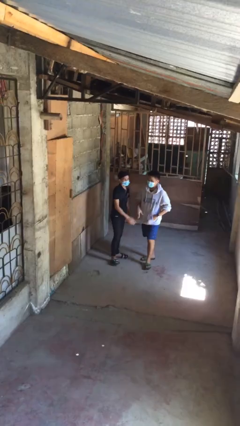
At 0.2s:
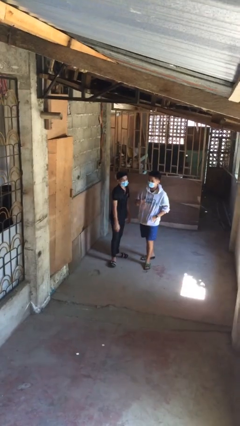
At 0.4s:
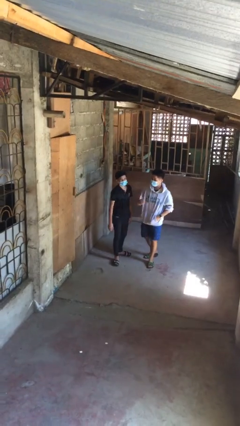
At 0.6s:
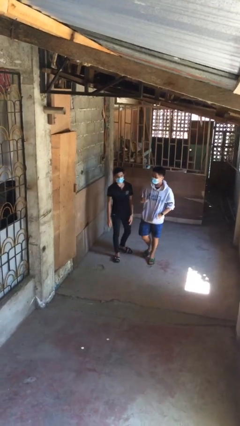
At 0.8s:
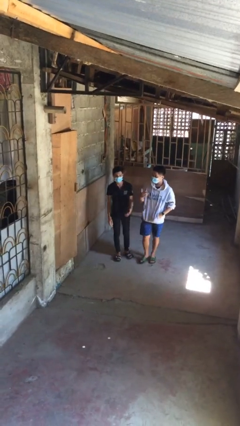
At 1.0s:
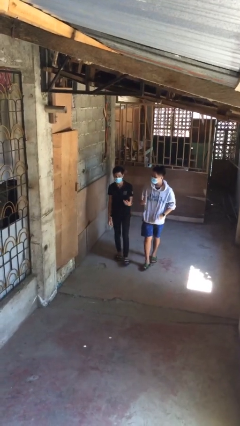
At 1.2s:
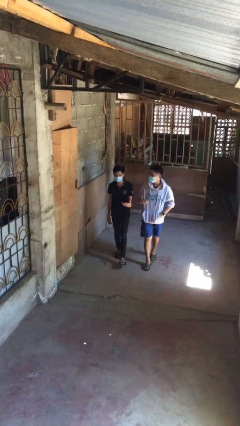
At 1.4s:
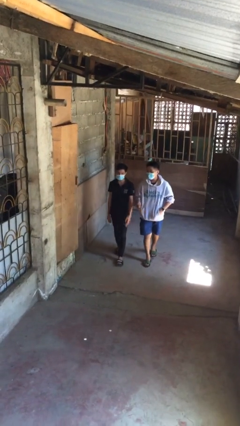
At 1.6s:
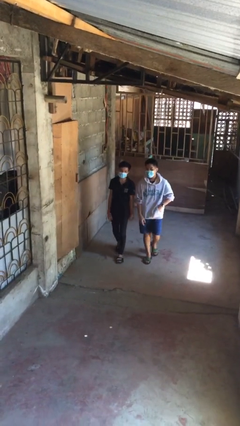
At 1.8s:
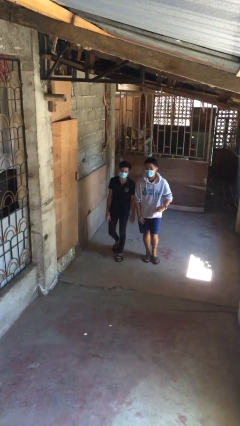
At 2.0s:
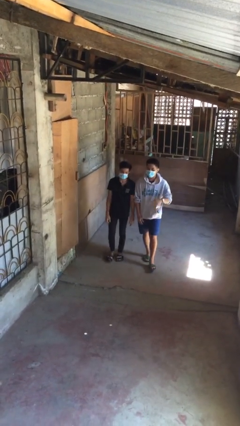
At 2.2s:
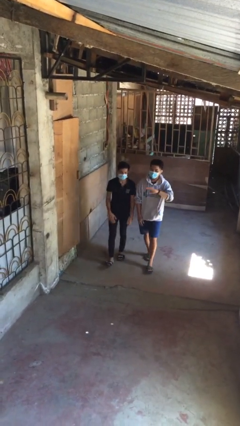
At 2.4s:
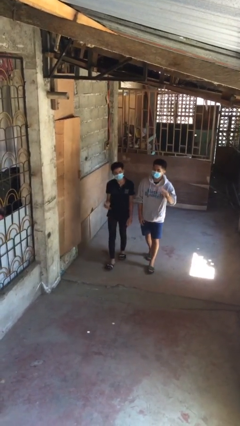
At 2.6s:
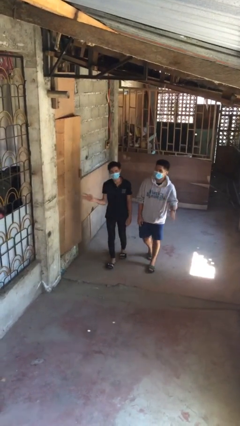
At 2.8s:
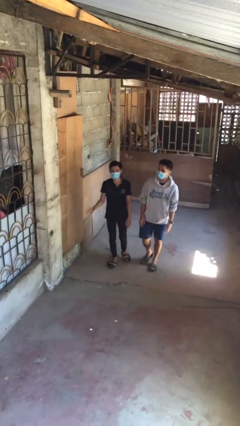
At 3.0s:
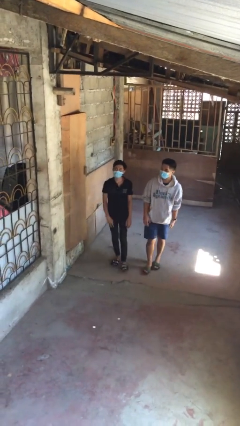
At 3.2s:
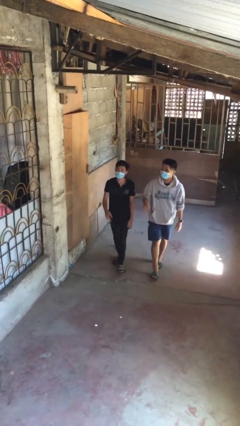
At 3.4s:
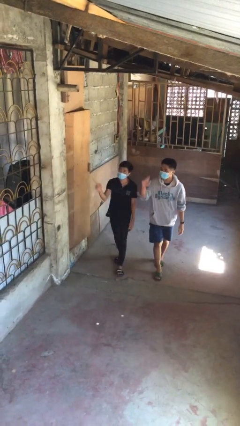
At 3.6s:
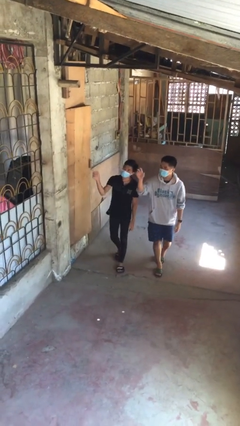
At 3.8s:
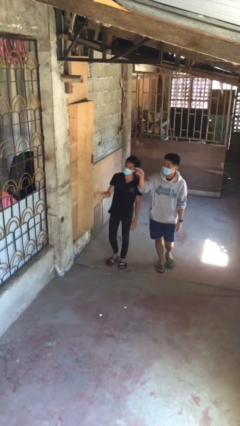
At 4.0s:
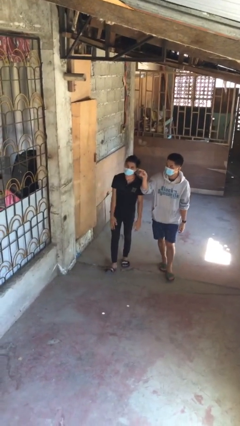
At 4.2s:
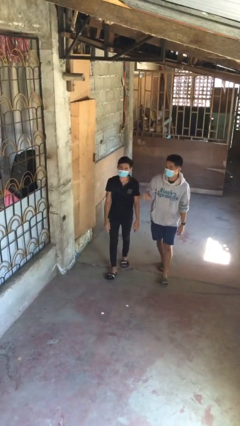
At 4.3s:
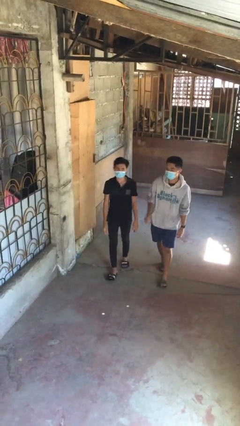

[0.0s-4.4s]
person talks to person

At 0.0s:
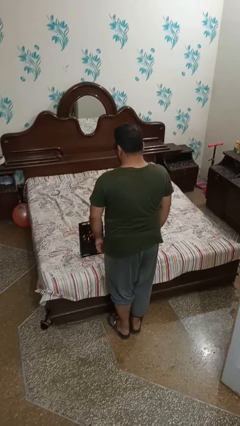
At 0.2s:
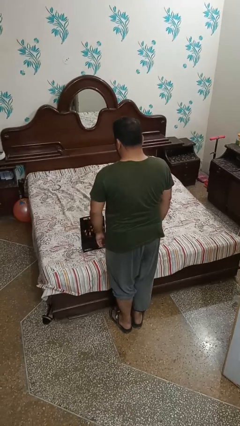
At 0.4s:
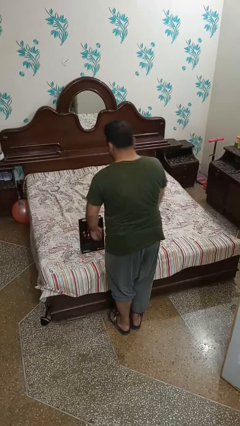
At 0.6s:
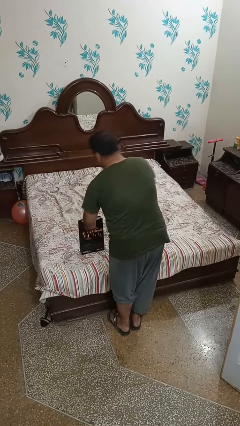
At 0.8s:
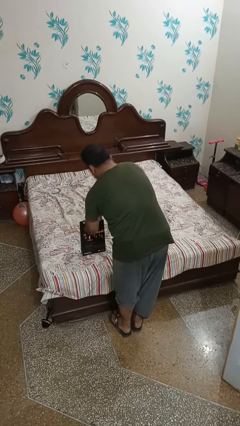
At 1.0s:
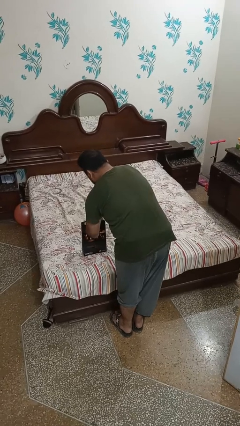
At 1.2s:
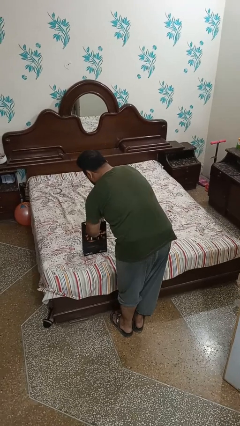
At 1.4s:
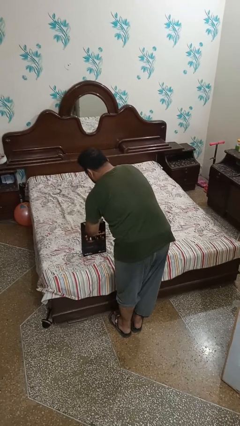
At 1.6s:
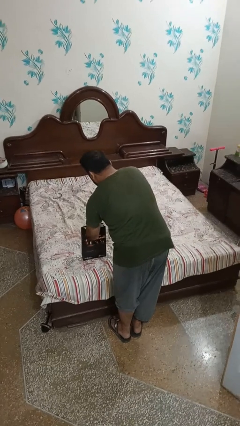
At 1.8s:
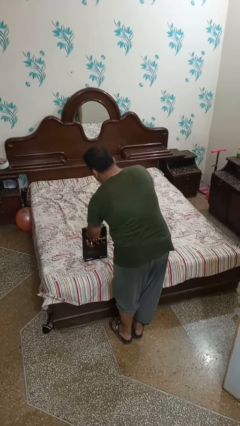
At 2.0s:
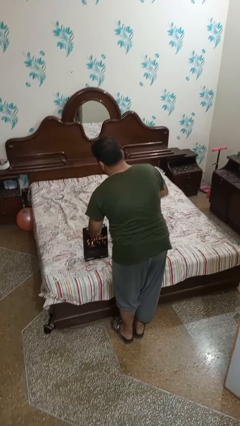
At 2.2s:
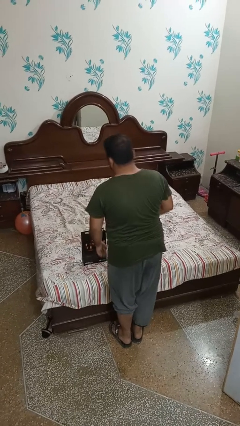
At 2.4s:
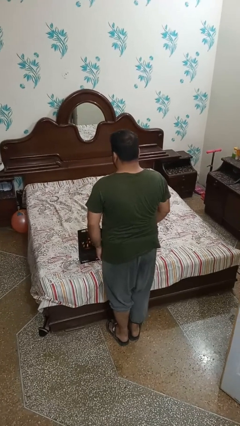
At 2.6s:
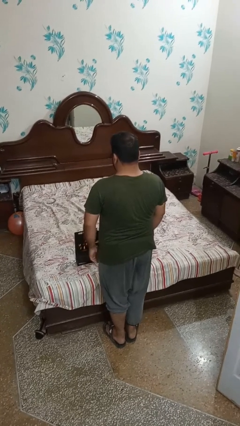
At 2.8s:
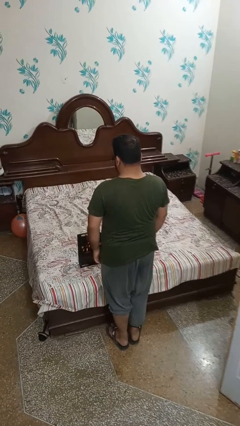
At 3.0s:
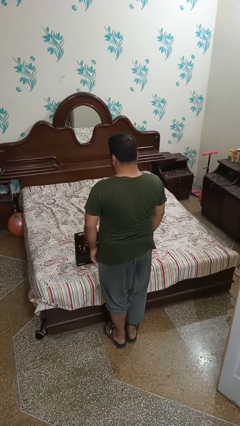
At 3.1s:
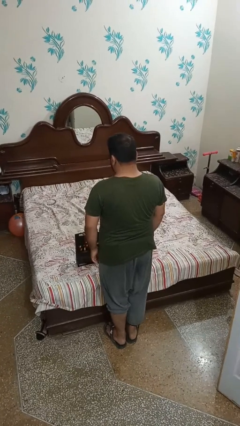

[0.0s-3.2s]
person takes object from bag

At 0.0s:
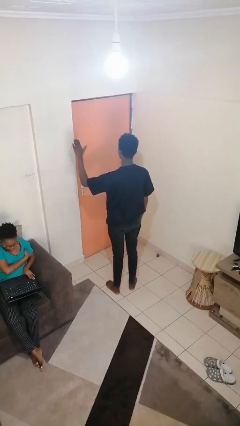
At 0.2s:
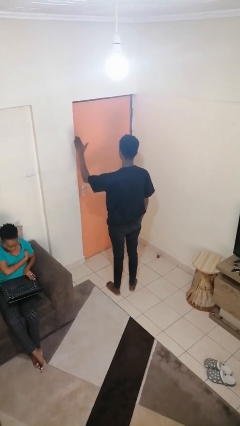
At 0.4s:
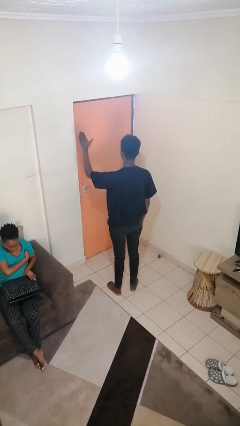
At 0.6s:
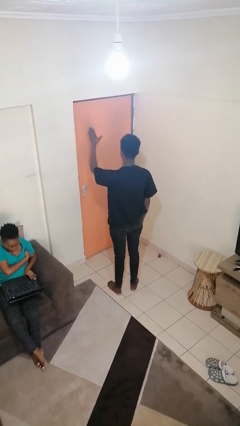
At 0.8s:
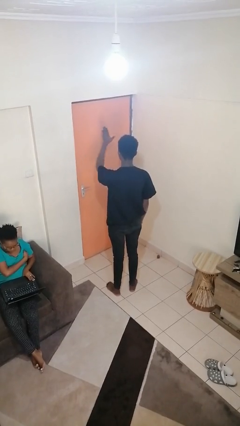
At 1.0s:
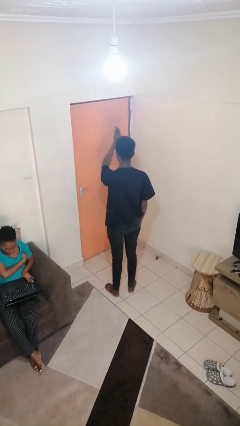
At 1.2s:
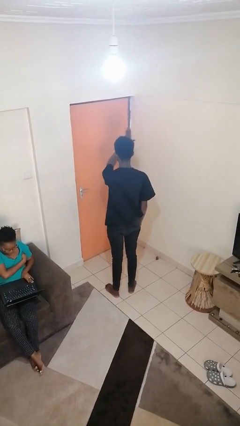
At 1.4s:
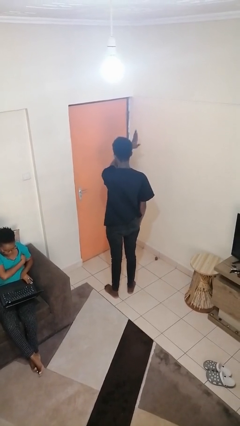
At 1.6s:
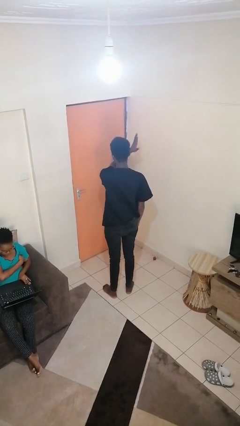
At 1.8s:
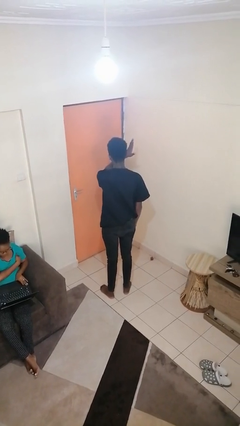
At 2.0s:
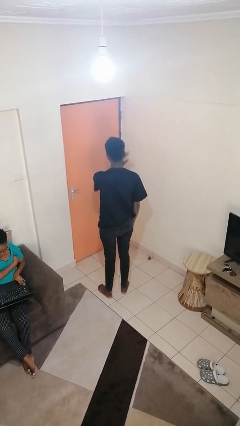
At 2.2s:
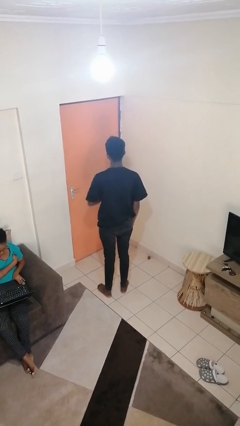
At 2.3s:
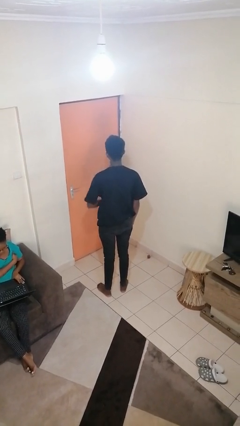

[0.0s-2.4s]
person gestures swipe right

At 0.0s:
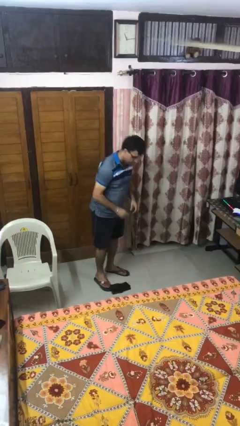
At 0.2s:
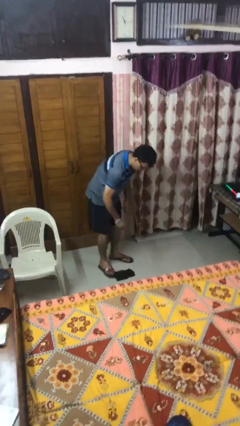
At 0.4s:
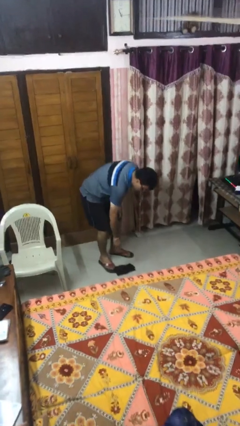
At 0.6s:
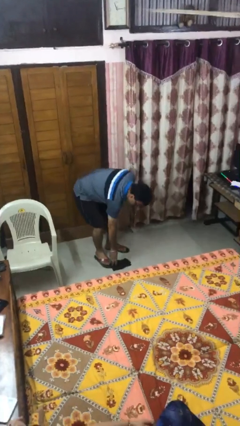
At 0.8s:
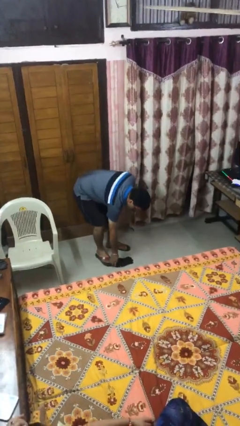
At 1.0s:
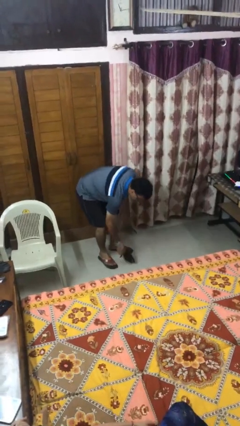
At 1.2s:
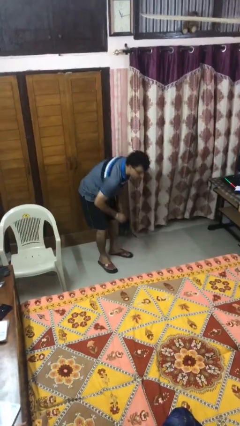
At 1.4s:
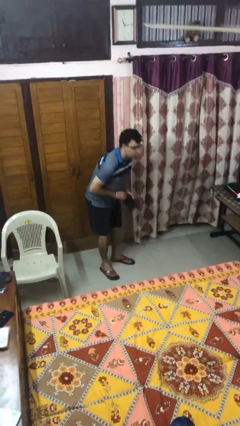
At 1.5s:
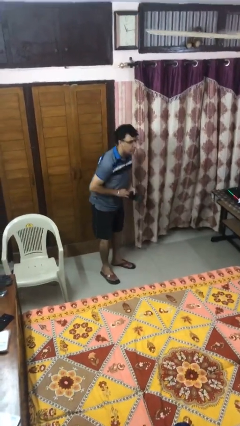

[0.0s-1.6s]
person picks up object from floor

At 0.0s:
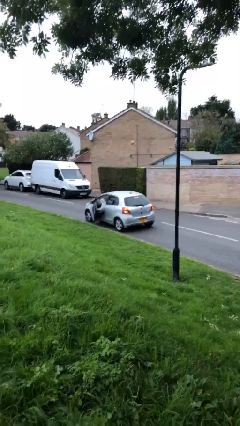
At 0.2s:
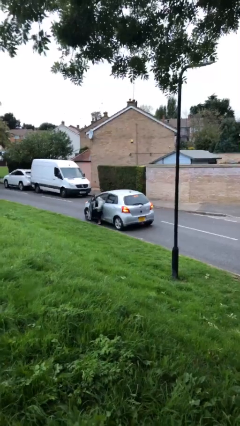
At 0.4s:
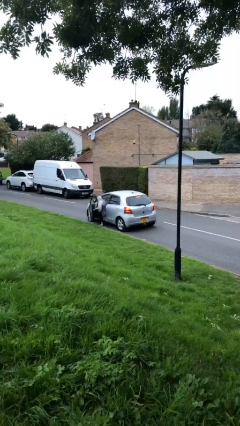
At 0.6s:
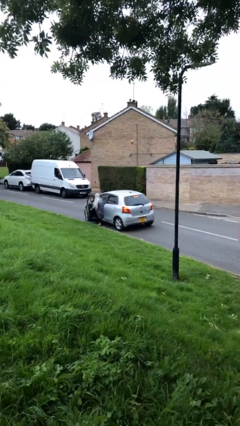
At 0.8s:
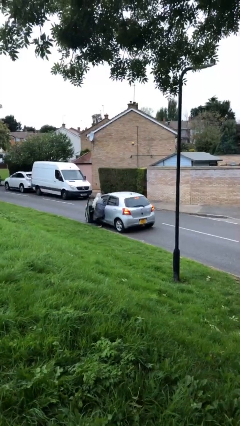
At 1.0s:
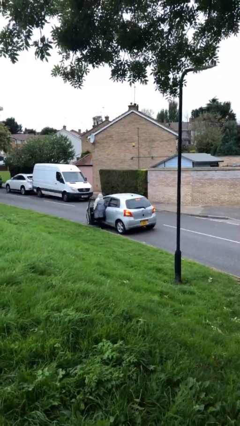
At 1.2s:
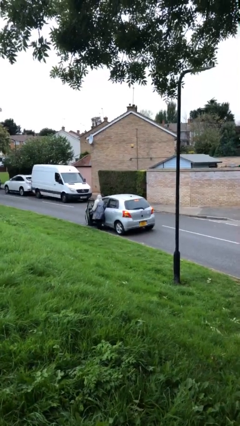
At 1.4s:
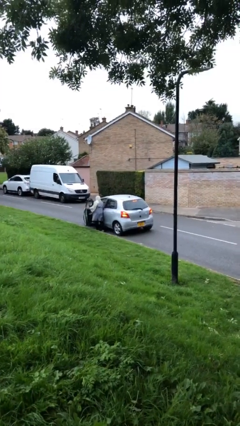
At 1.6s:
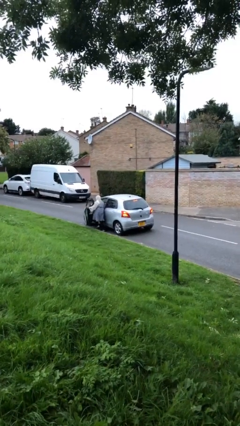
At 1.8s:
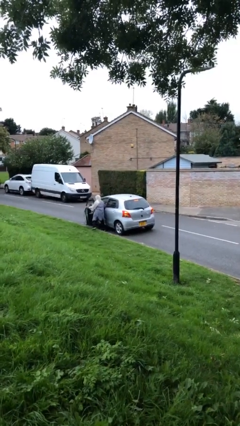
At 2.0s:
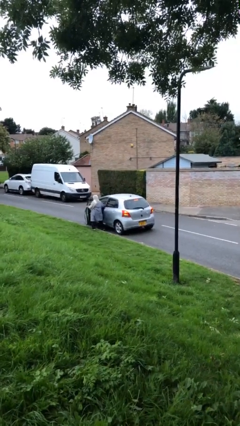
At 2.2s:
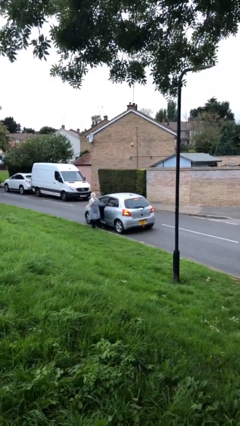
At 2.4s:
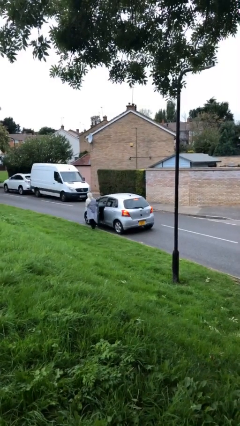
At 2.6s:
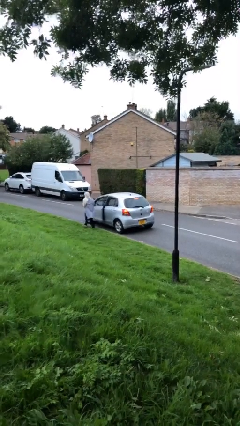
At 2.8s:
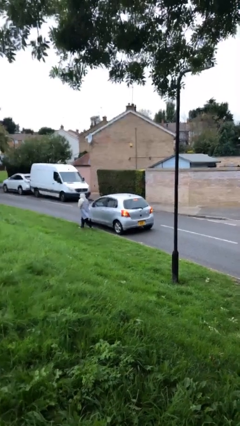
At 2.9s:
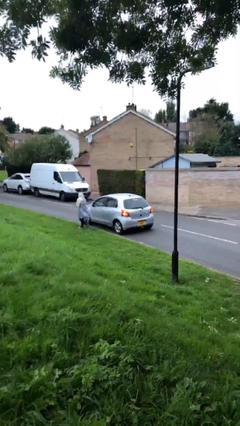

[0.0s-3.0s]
car drops off person

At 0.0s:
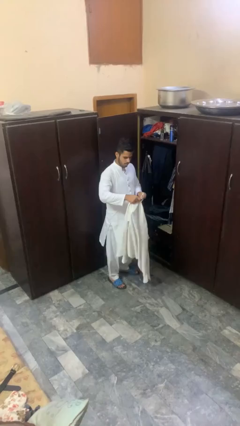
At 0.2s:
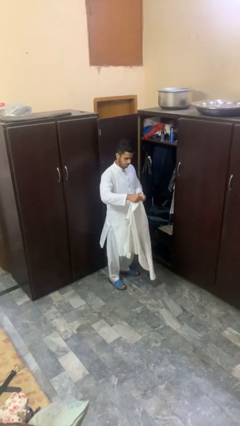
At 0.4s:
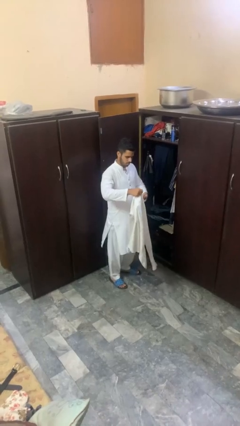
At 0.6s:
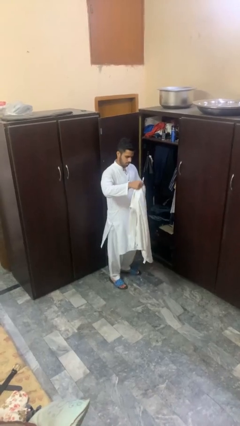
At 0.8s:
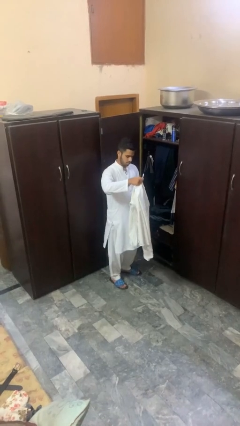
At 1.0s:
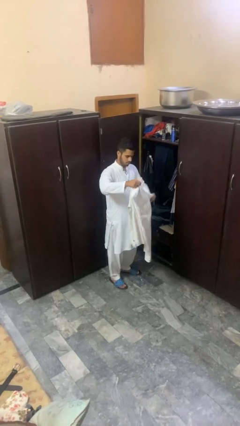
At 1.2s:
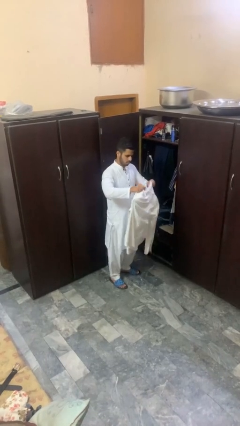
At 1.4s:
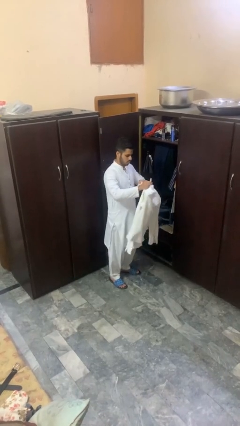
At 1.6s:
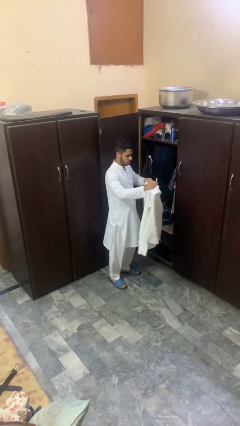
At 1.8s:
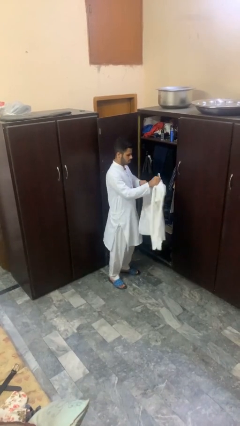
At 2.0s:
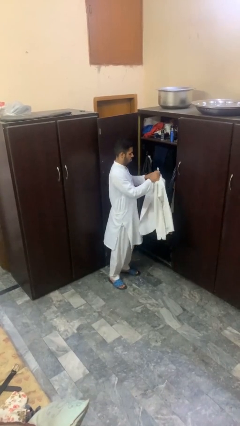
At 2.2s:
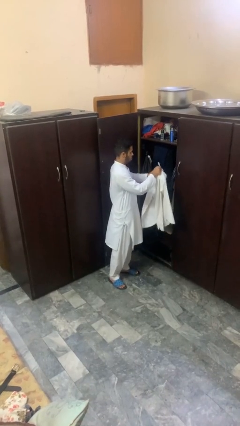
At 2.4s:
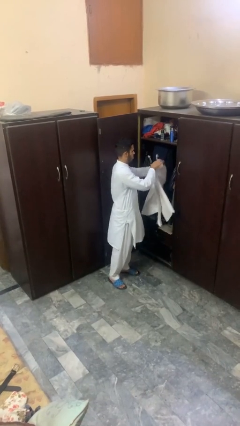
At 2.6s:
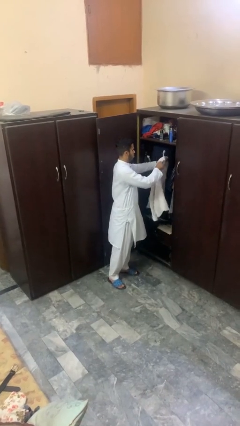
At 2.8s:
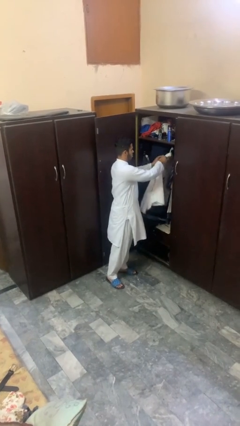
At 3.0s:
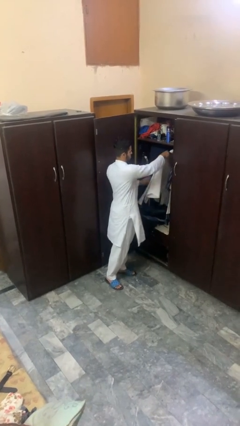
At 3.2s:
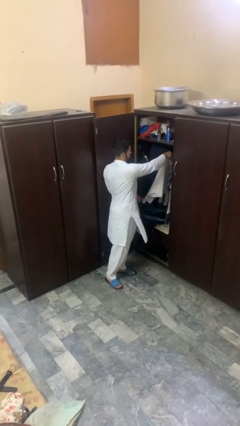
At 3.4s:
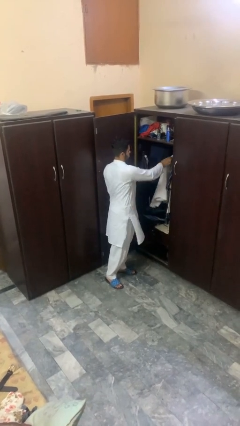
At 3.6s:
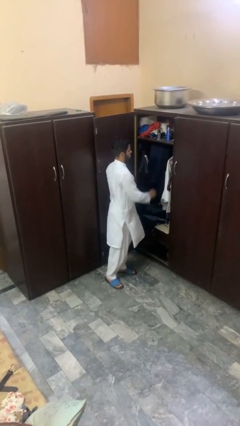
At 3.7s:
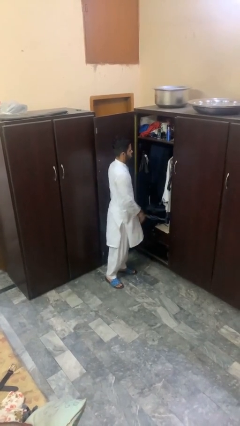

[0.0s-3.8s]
person puts clothes into closet
